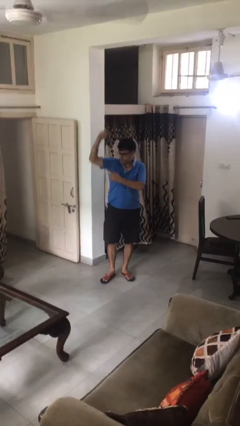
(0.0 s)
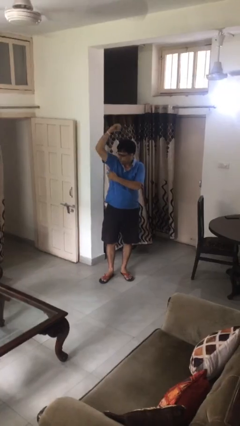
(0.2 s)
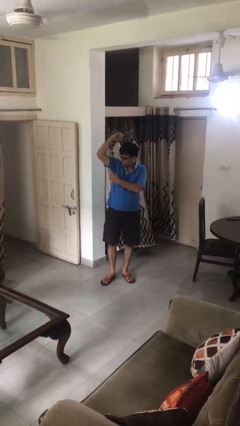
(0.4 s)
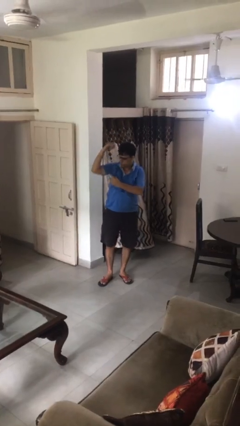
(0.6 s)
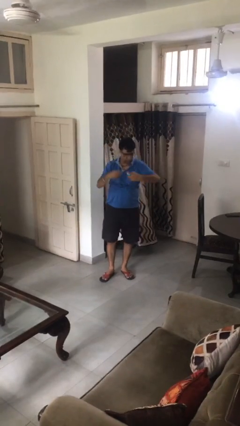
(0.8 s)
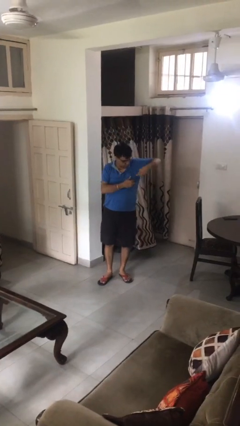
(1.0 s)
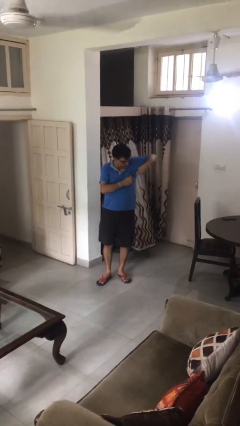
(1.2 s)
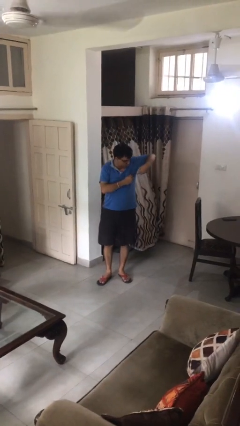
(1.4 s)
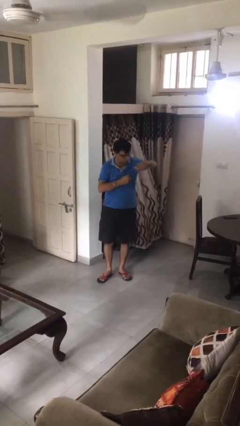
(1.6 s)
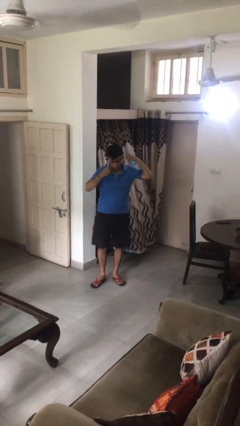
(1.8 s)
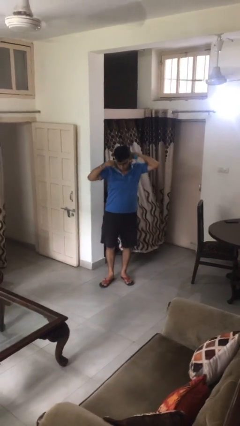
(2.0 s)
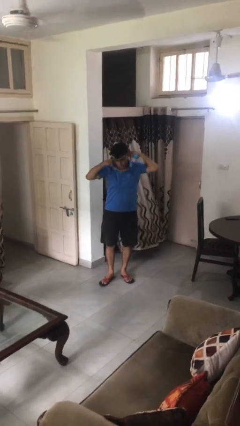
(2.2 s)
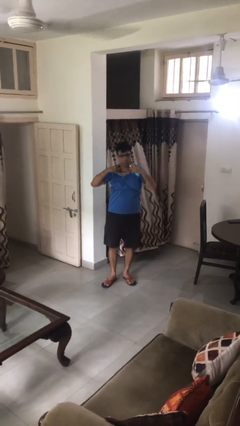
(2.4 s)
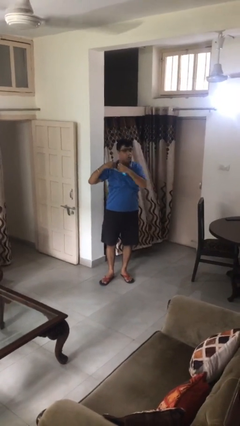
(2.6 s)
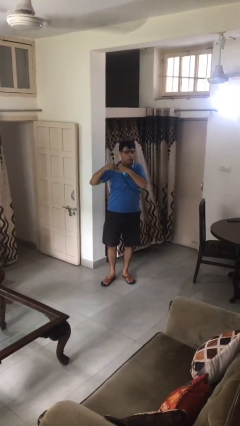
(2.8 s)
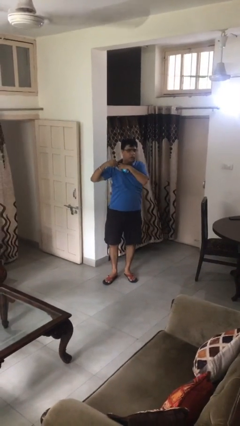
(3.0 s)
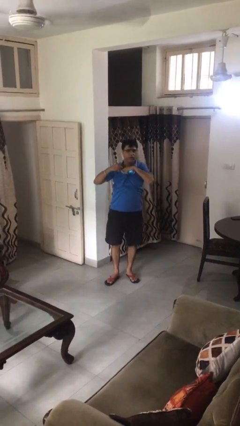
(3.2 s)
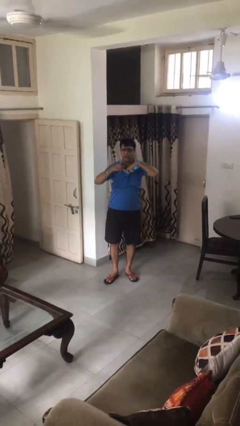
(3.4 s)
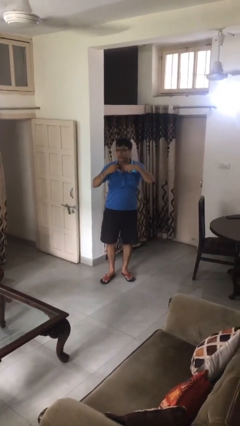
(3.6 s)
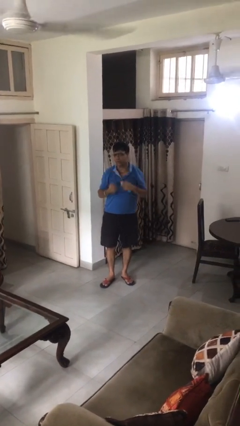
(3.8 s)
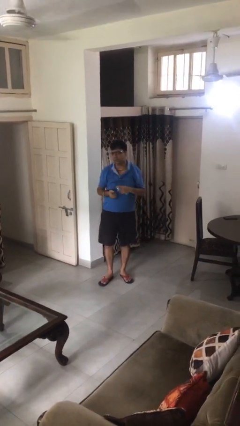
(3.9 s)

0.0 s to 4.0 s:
person applies deodorant

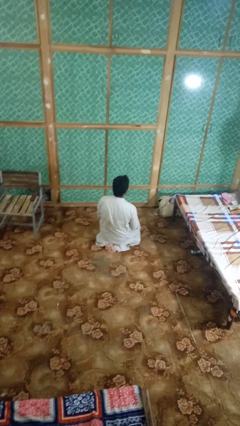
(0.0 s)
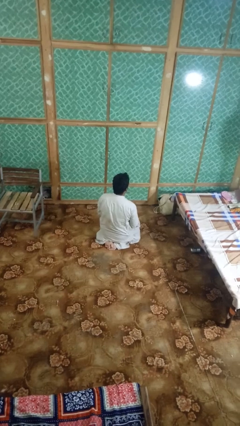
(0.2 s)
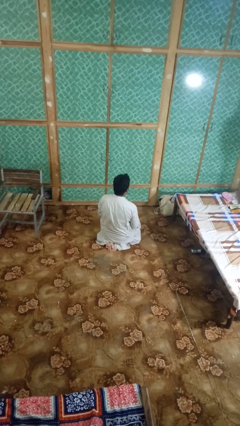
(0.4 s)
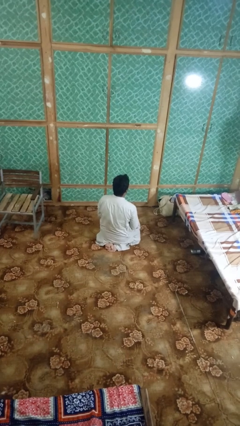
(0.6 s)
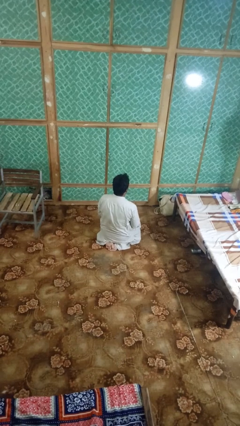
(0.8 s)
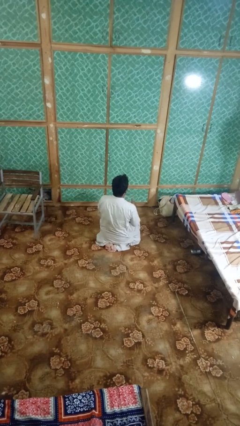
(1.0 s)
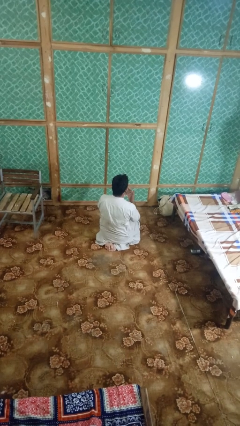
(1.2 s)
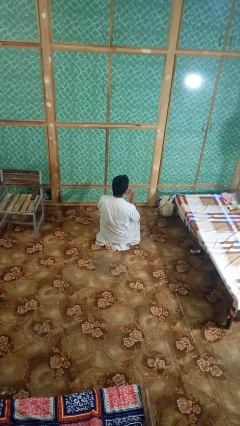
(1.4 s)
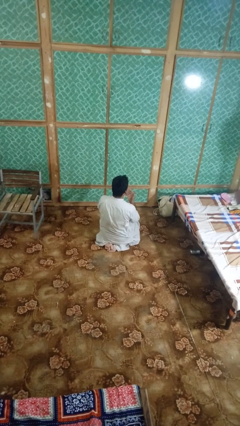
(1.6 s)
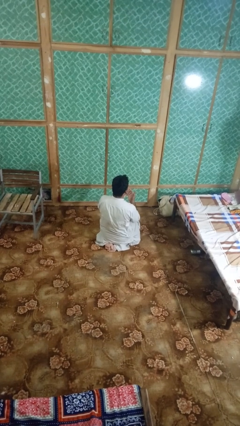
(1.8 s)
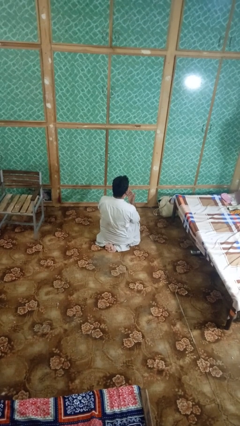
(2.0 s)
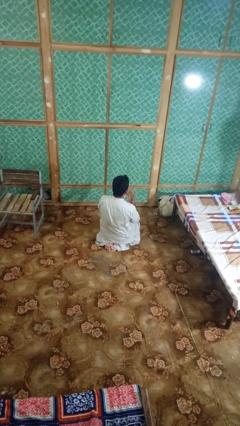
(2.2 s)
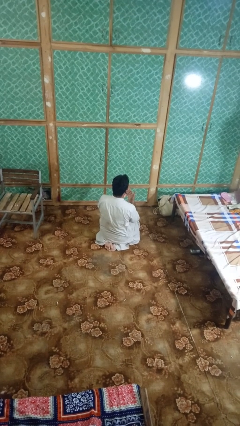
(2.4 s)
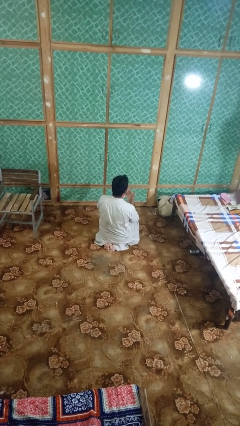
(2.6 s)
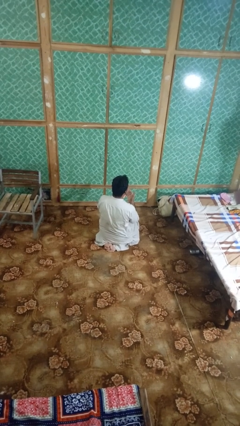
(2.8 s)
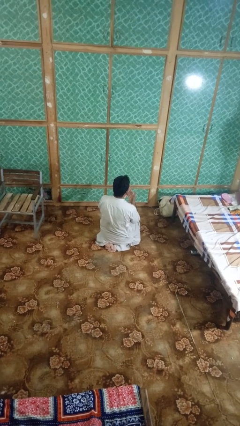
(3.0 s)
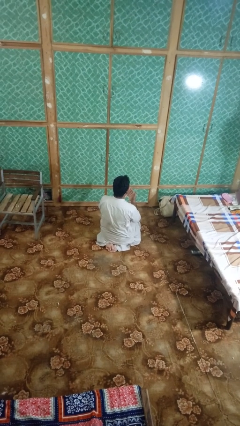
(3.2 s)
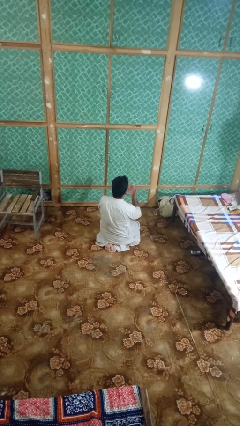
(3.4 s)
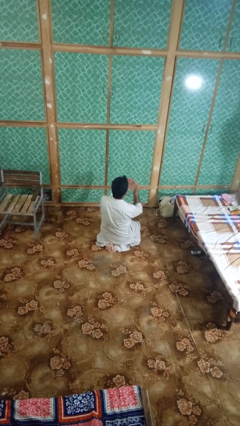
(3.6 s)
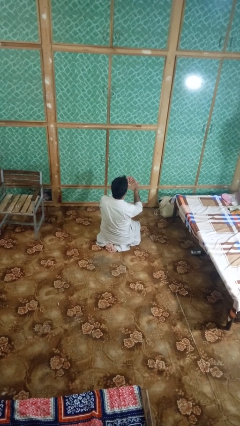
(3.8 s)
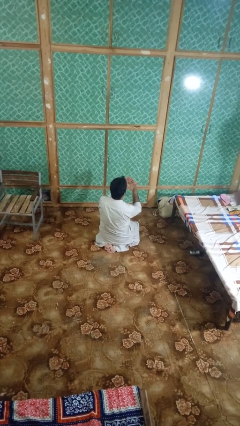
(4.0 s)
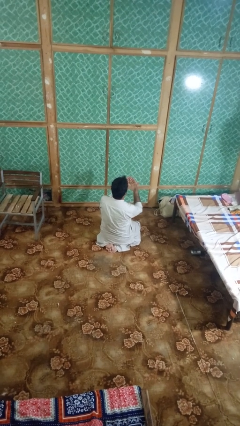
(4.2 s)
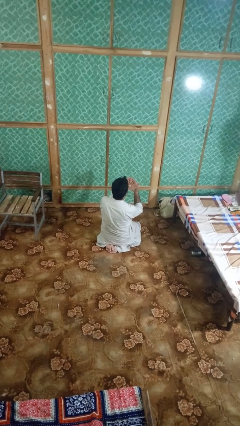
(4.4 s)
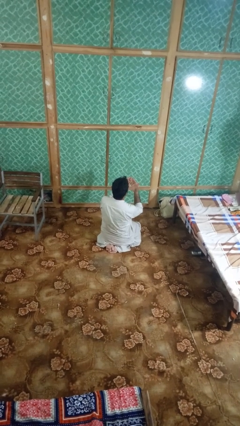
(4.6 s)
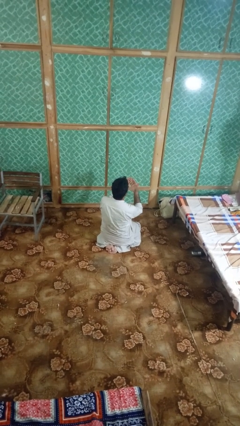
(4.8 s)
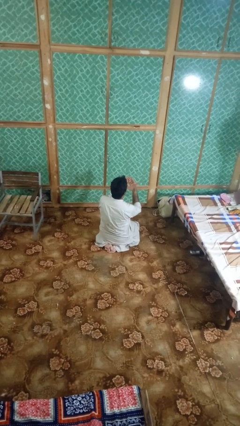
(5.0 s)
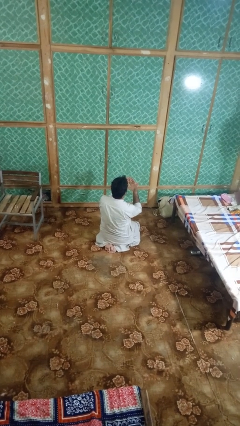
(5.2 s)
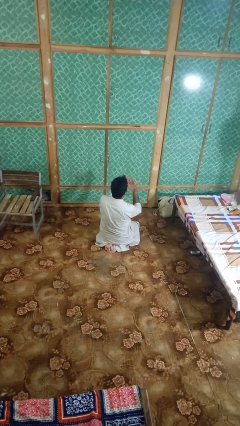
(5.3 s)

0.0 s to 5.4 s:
person prays

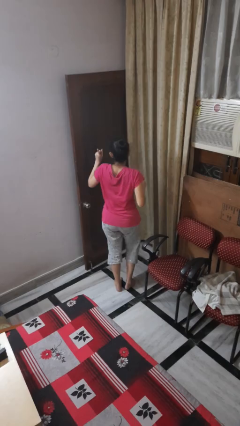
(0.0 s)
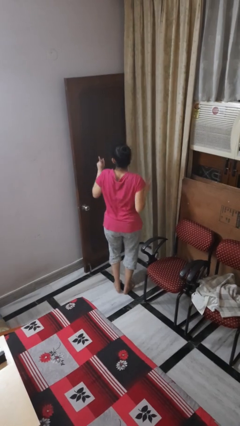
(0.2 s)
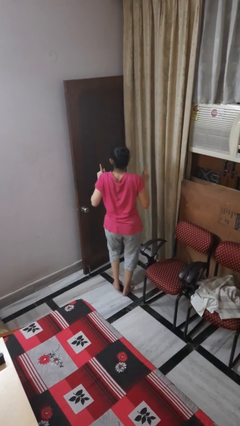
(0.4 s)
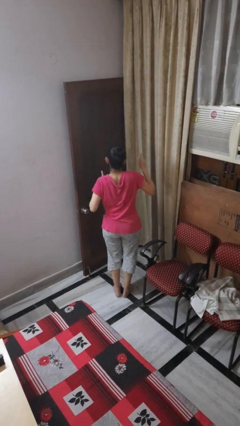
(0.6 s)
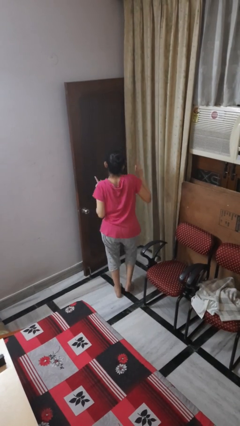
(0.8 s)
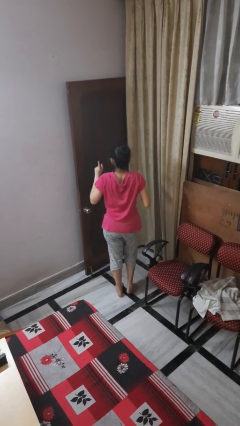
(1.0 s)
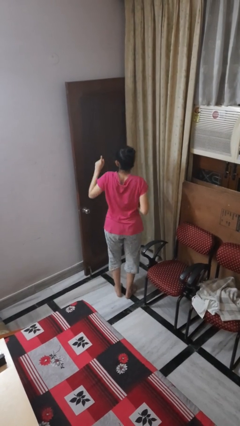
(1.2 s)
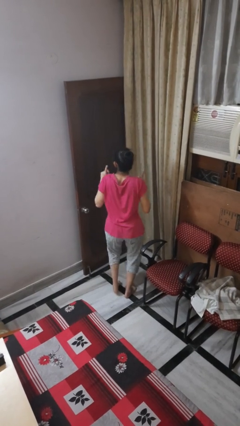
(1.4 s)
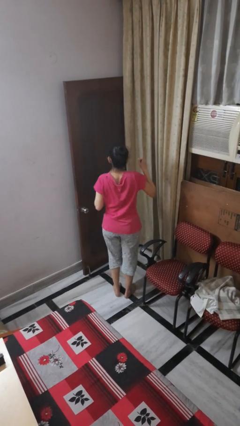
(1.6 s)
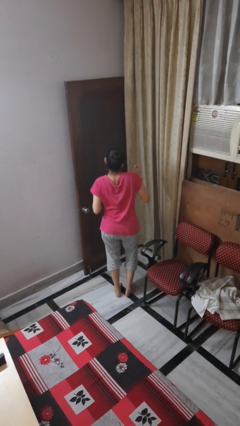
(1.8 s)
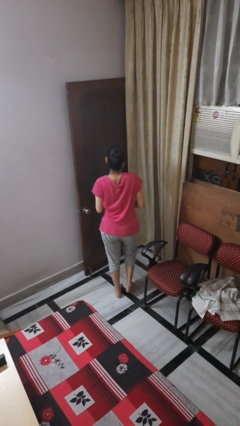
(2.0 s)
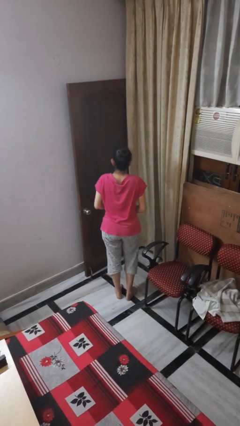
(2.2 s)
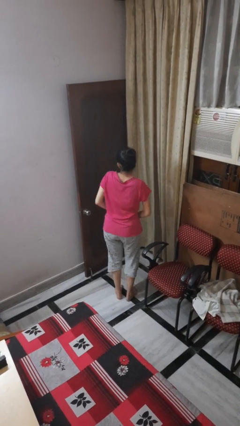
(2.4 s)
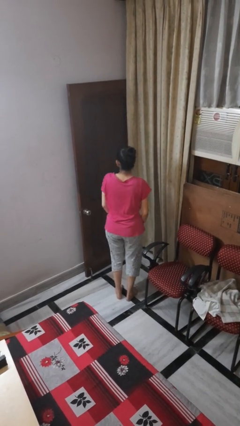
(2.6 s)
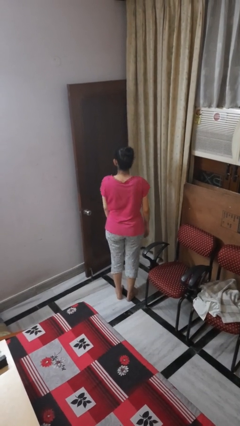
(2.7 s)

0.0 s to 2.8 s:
person dances in place

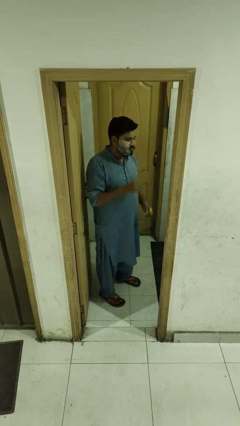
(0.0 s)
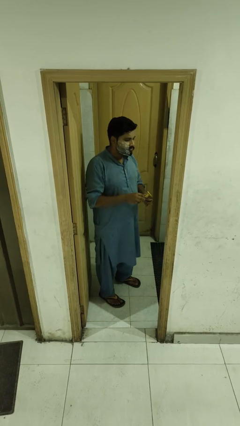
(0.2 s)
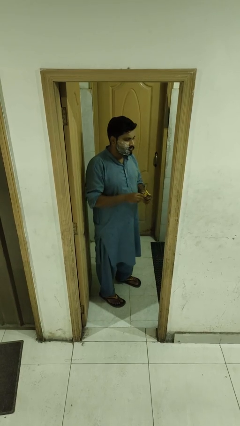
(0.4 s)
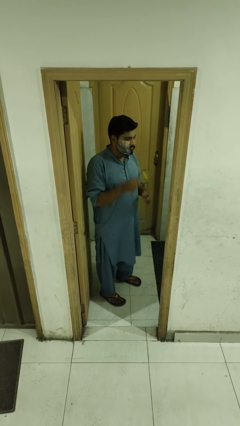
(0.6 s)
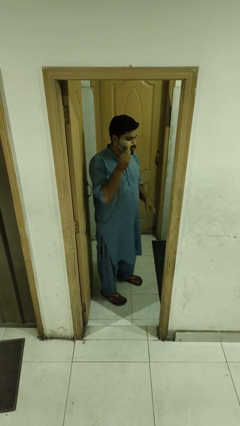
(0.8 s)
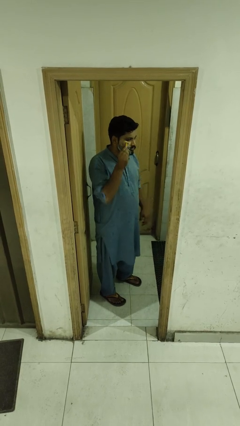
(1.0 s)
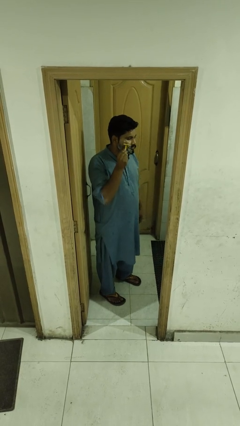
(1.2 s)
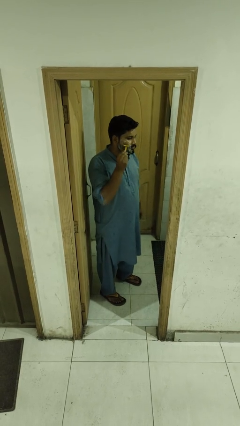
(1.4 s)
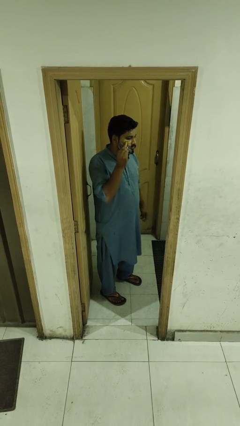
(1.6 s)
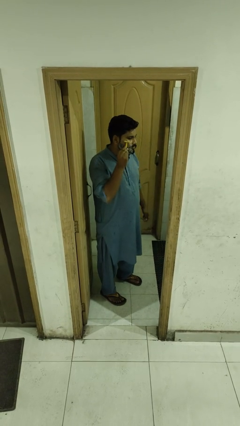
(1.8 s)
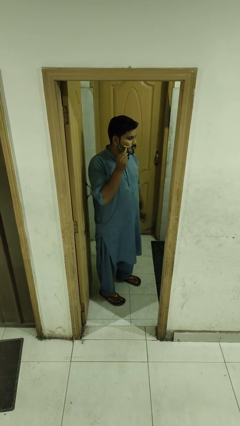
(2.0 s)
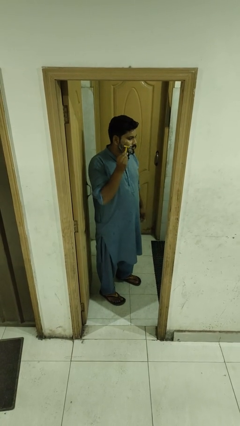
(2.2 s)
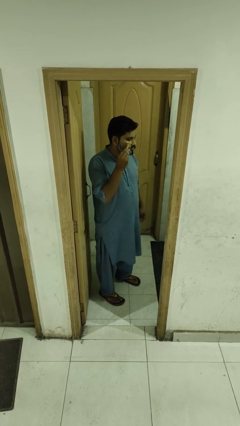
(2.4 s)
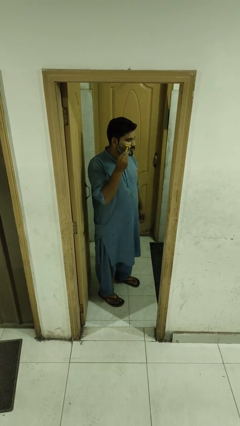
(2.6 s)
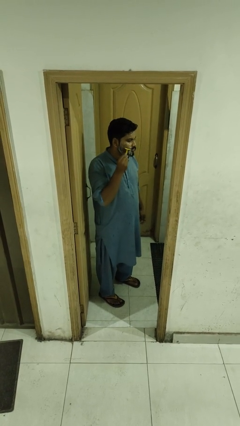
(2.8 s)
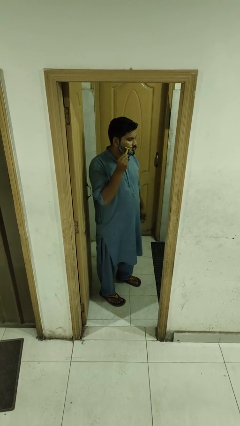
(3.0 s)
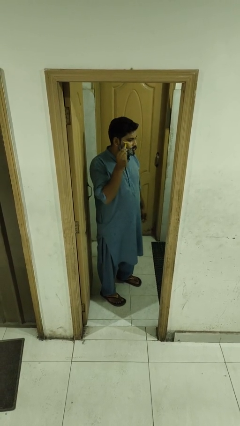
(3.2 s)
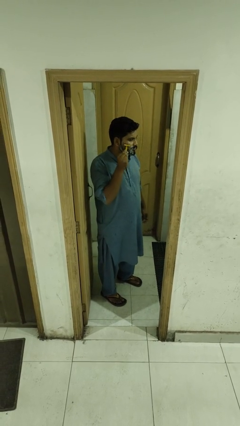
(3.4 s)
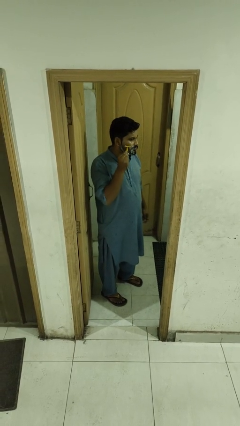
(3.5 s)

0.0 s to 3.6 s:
person shaves face

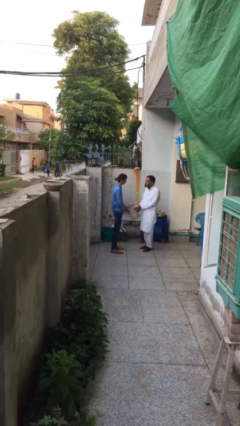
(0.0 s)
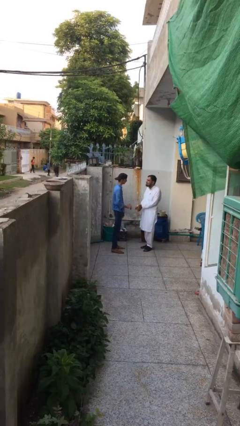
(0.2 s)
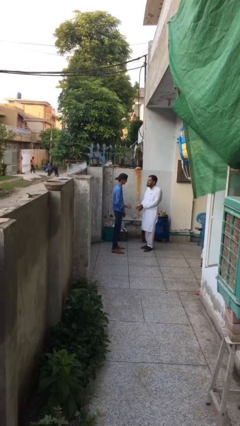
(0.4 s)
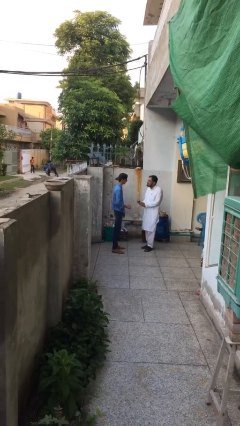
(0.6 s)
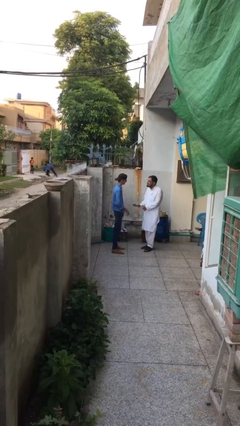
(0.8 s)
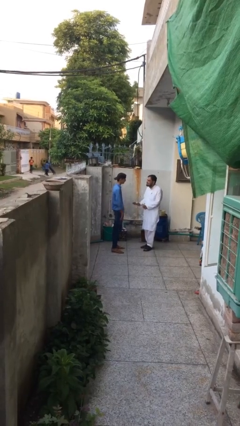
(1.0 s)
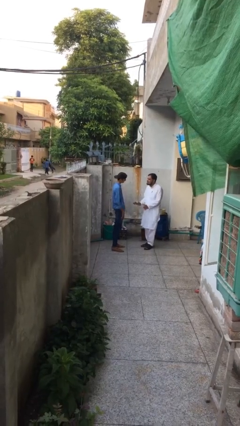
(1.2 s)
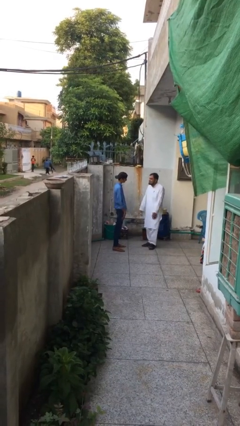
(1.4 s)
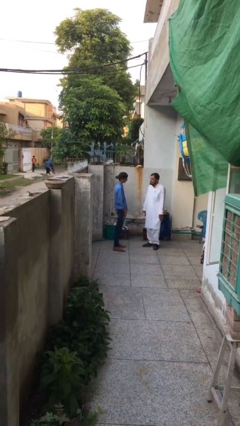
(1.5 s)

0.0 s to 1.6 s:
person talks to person
